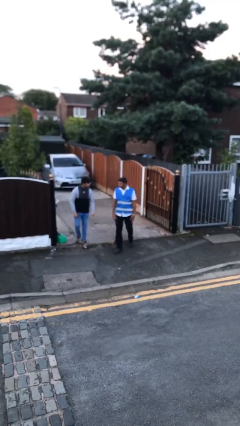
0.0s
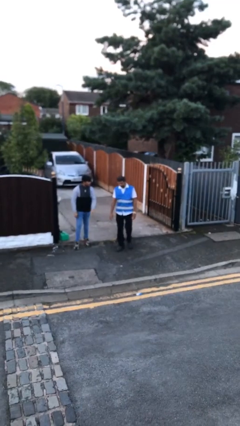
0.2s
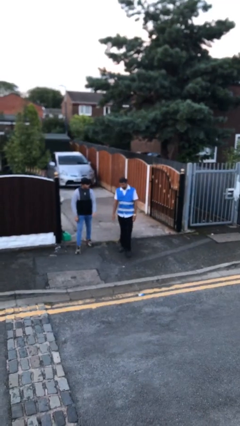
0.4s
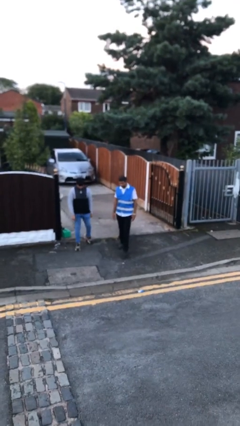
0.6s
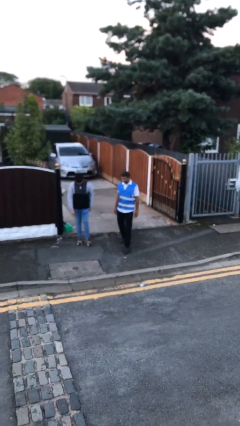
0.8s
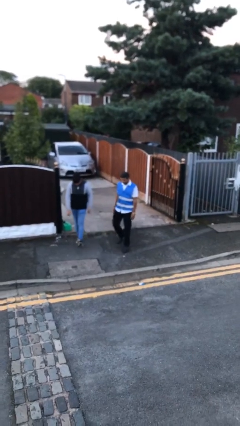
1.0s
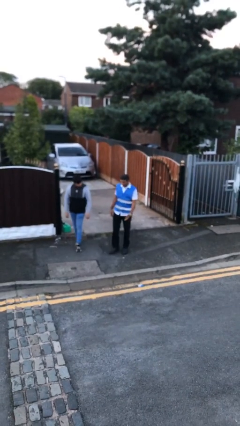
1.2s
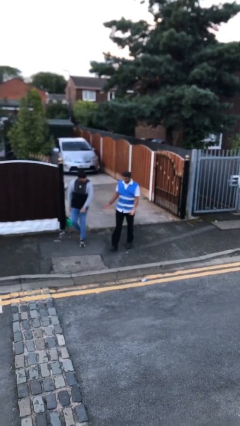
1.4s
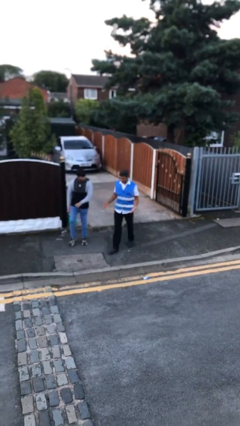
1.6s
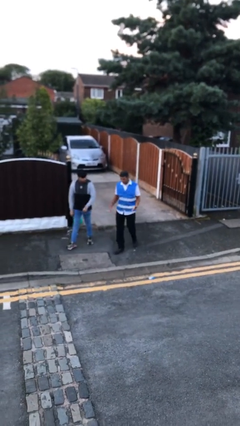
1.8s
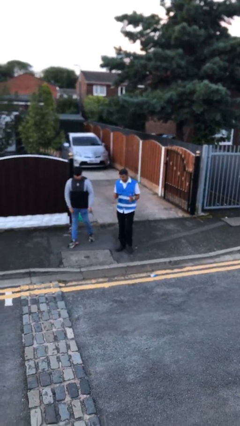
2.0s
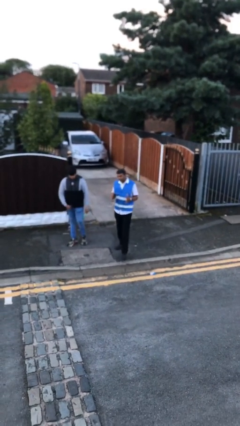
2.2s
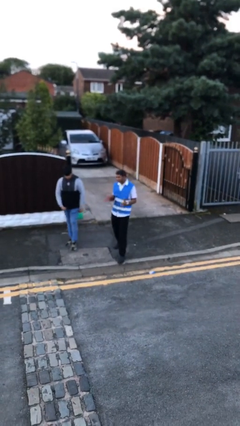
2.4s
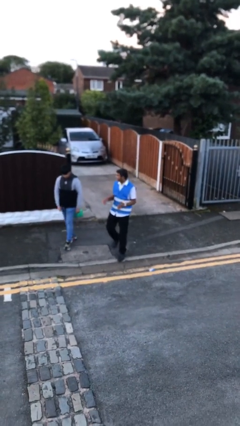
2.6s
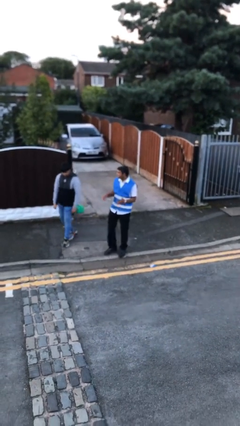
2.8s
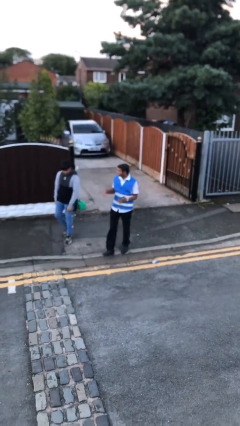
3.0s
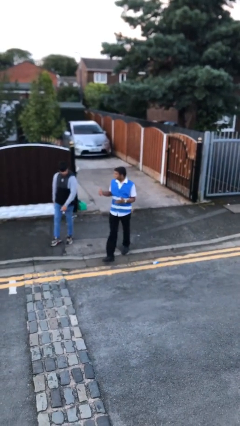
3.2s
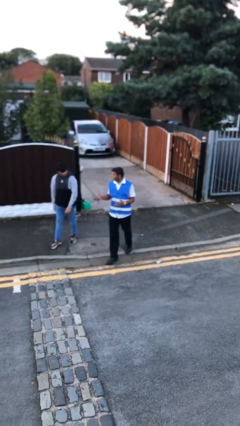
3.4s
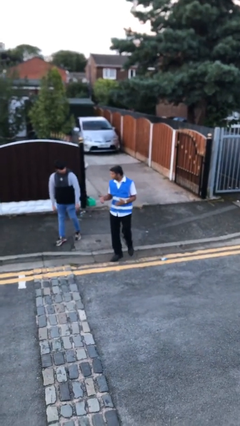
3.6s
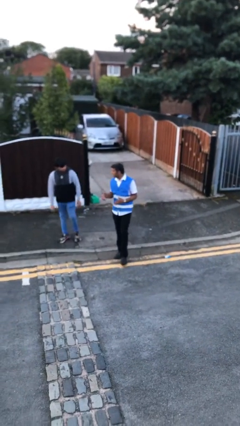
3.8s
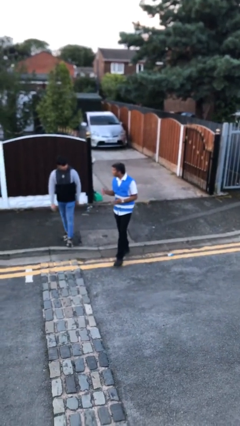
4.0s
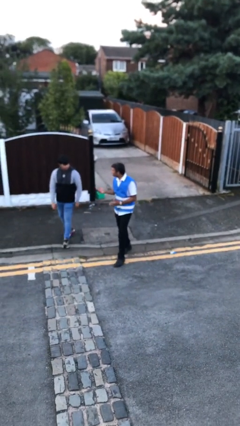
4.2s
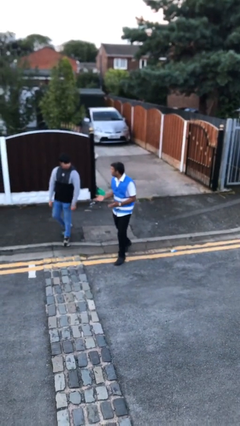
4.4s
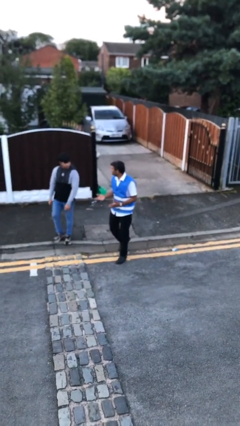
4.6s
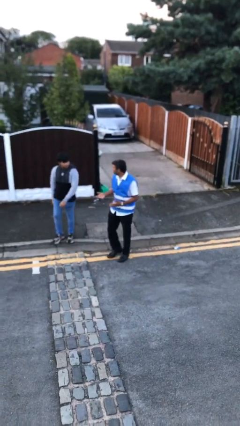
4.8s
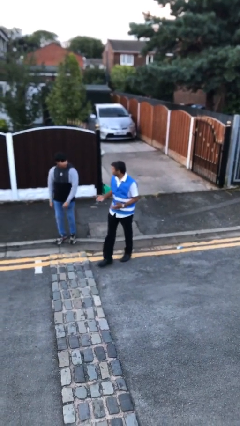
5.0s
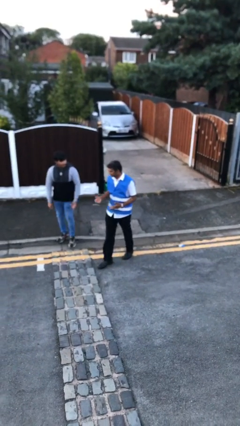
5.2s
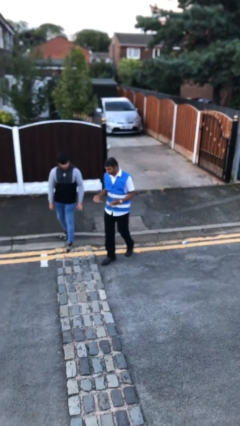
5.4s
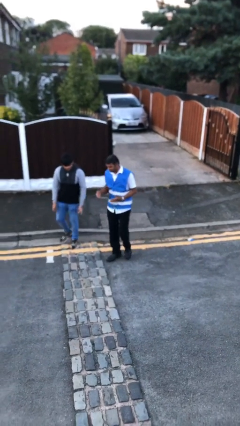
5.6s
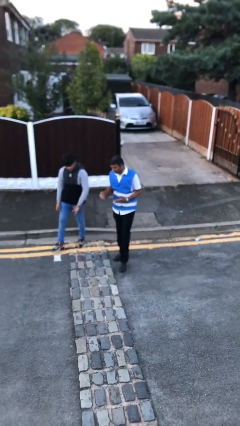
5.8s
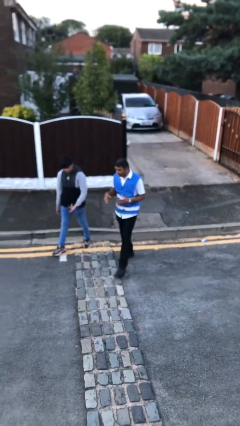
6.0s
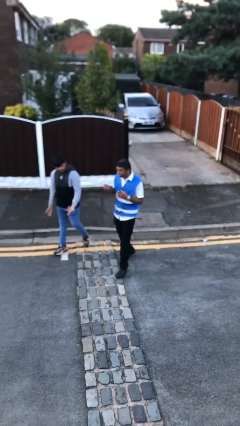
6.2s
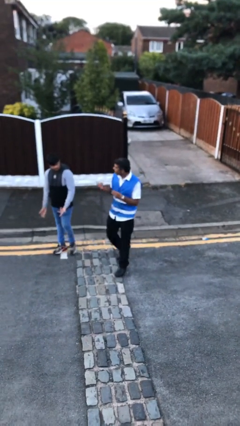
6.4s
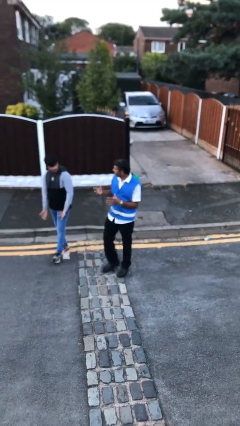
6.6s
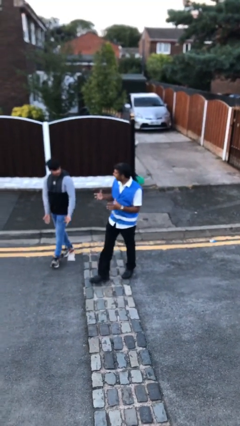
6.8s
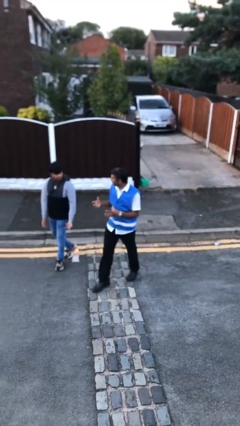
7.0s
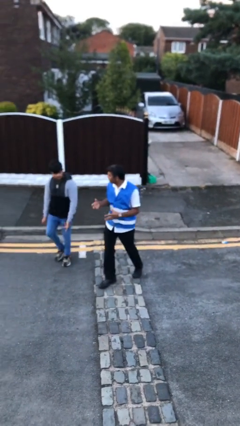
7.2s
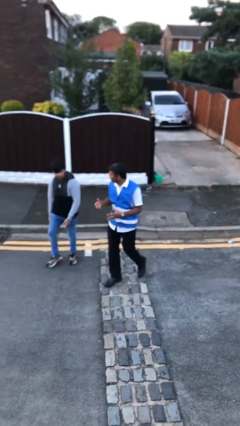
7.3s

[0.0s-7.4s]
person talks to person

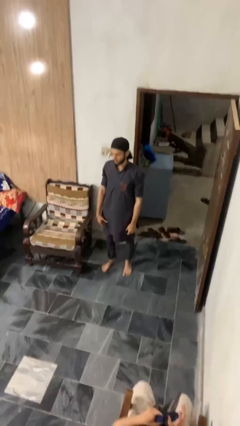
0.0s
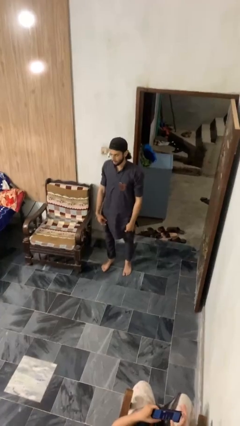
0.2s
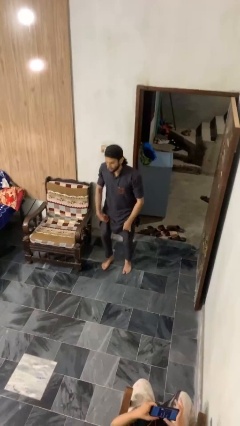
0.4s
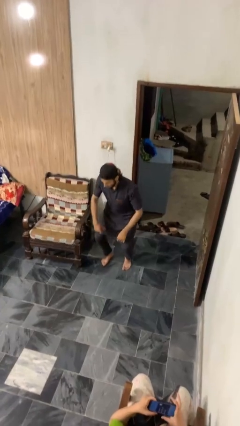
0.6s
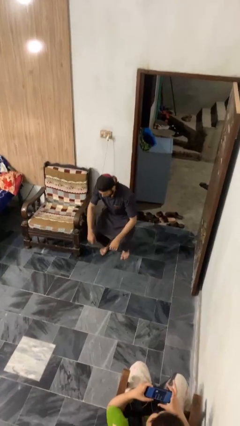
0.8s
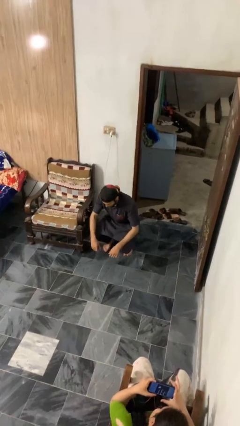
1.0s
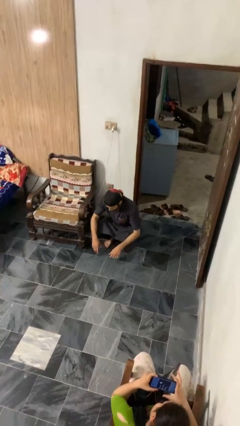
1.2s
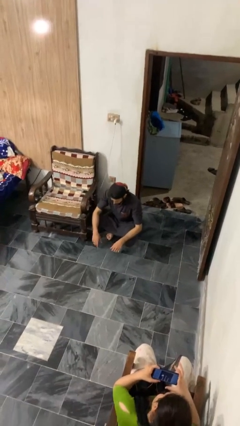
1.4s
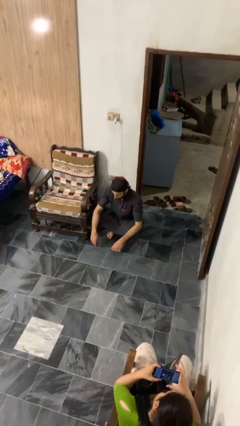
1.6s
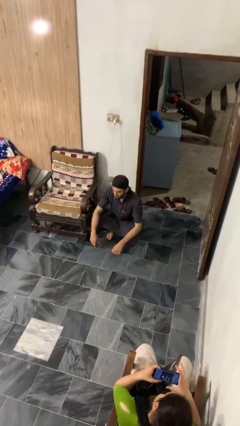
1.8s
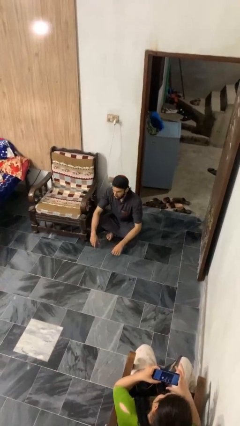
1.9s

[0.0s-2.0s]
person squats

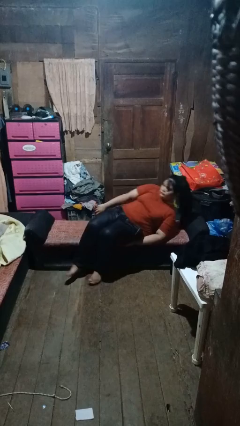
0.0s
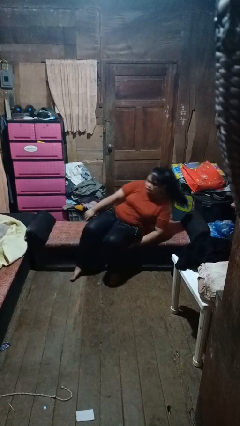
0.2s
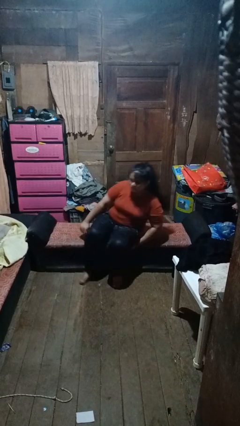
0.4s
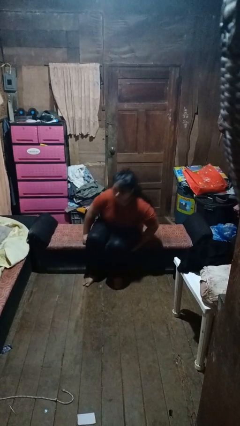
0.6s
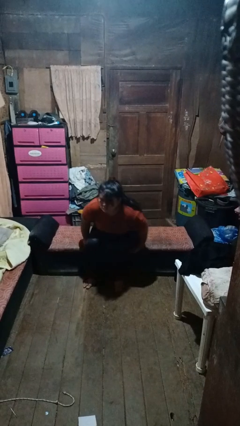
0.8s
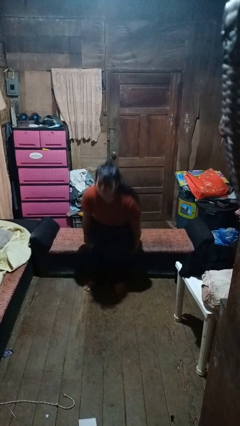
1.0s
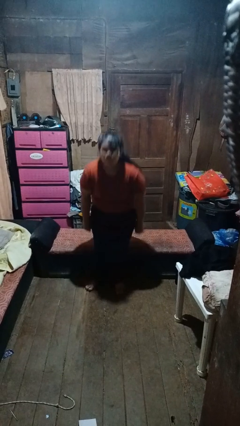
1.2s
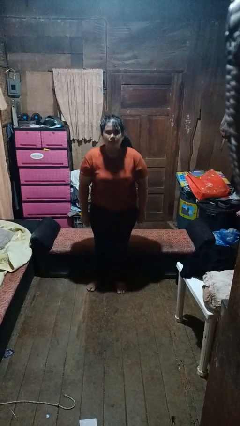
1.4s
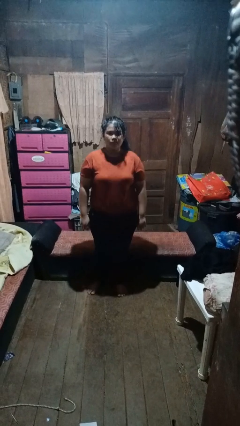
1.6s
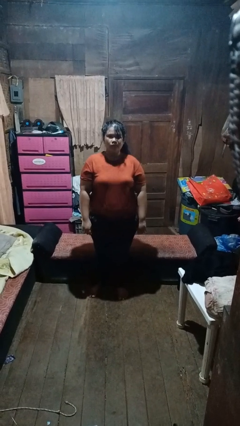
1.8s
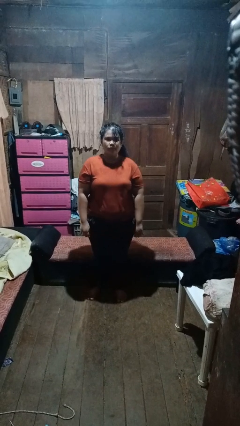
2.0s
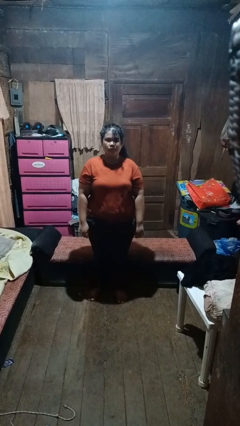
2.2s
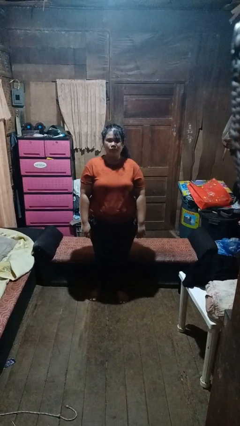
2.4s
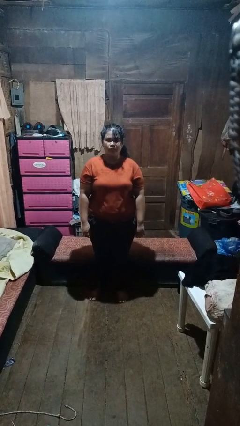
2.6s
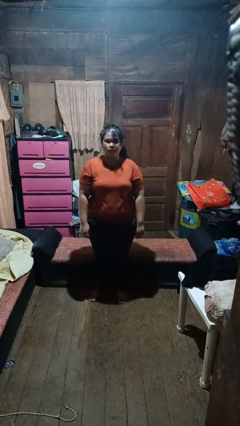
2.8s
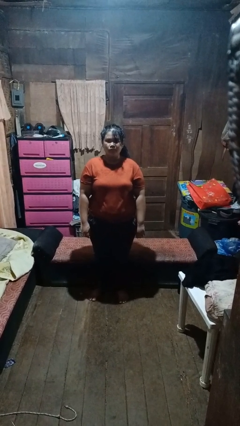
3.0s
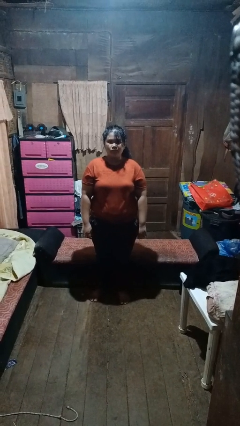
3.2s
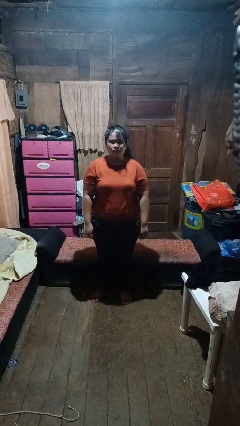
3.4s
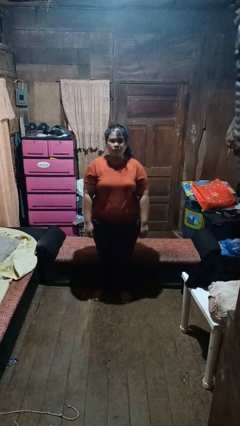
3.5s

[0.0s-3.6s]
person stands up

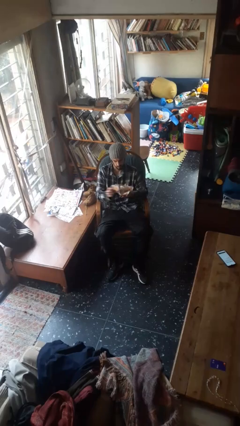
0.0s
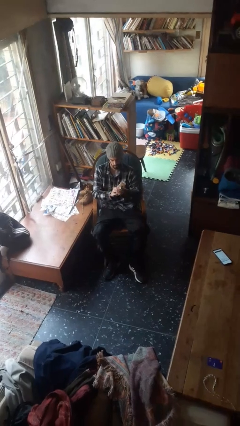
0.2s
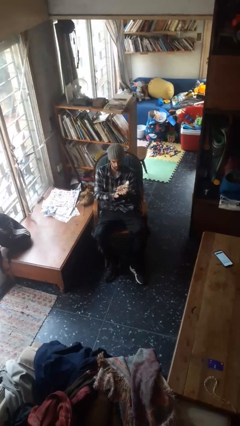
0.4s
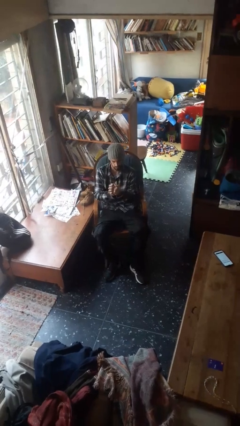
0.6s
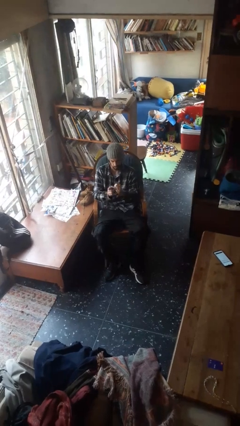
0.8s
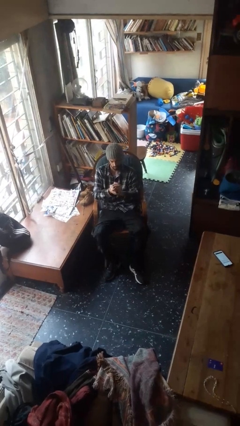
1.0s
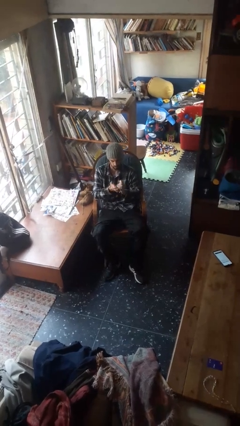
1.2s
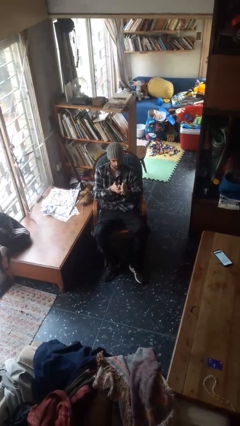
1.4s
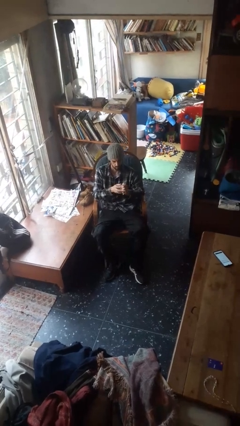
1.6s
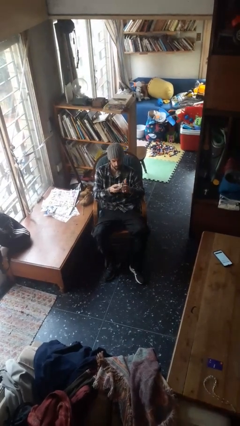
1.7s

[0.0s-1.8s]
person crumples paper

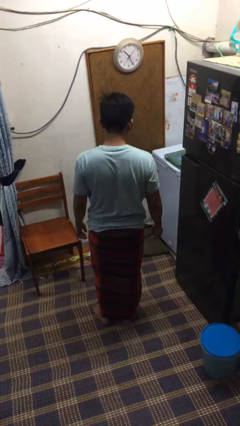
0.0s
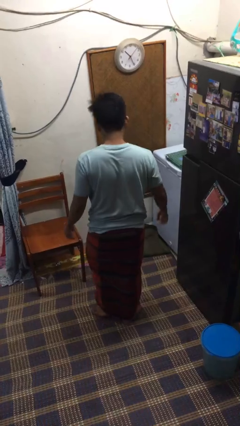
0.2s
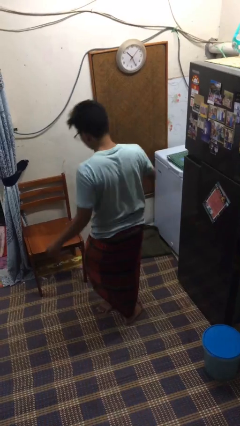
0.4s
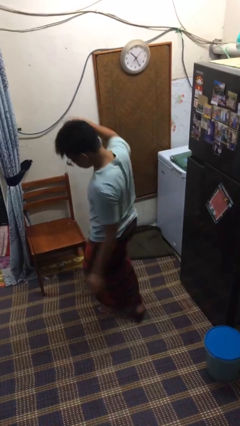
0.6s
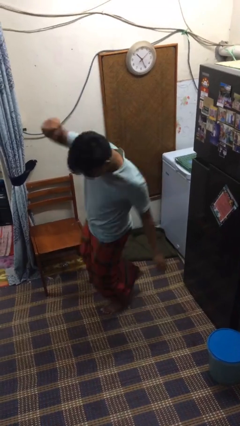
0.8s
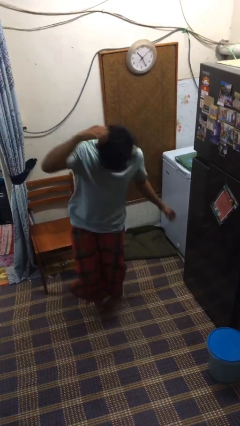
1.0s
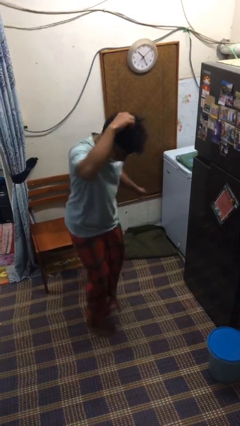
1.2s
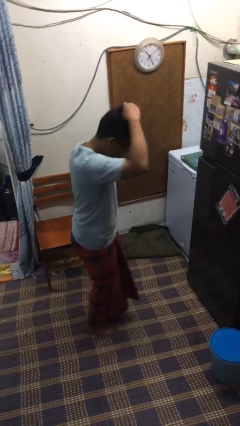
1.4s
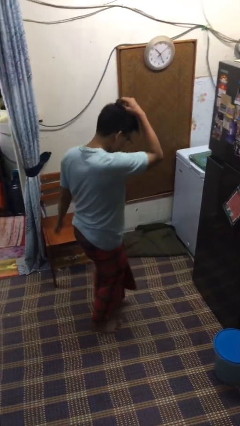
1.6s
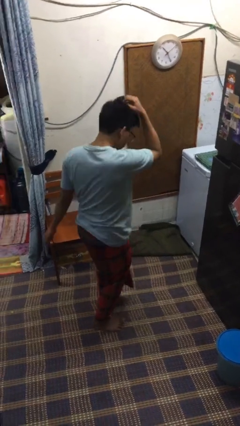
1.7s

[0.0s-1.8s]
person twirls

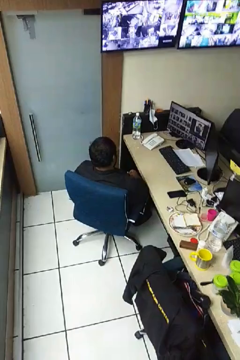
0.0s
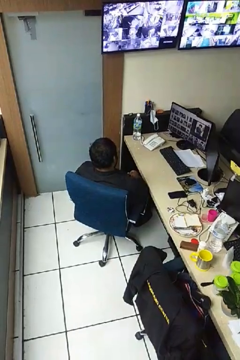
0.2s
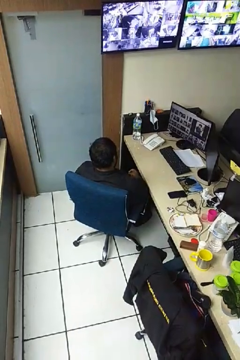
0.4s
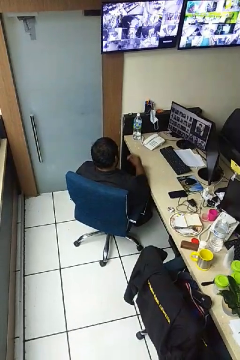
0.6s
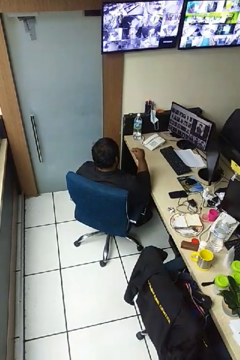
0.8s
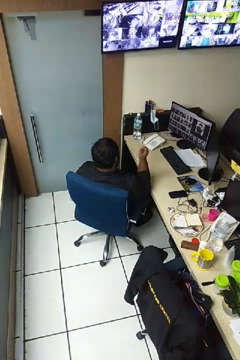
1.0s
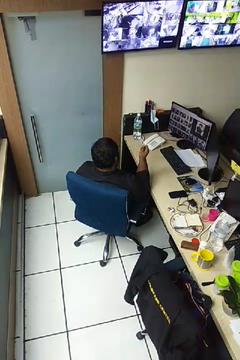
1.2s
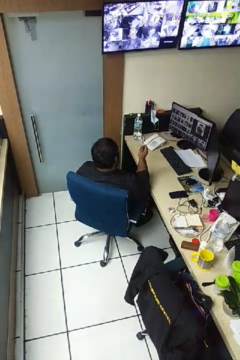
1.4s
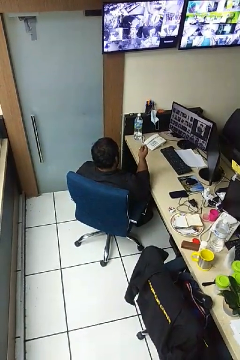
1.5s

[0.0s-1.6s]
person snaps fingers
